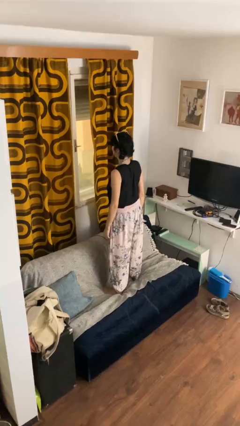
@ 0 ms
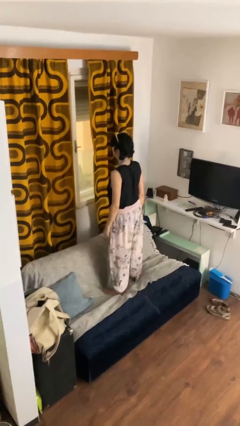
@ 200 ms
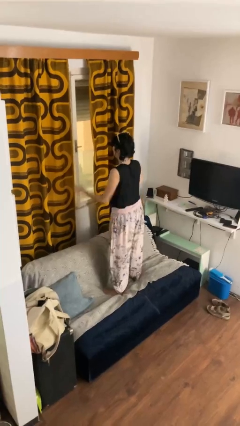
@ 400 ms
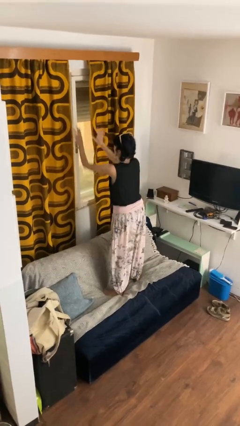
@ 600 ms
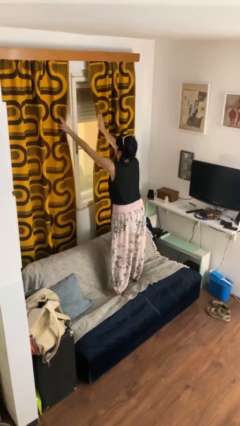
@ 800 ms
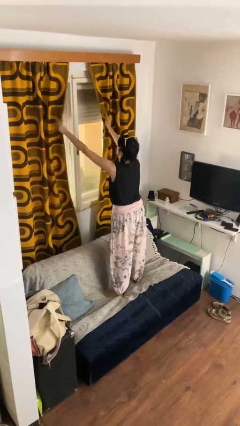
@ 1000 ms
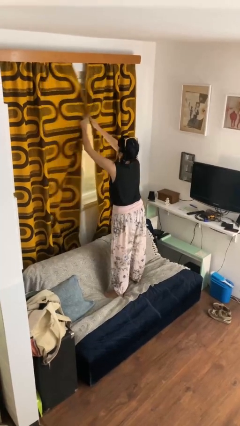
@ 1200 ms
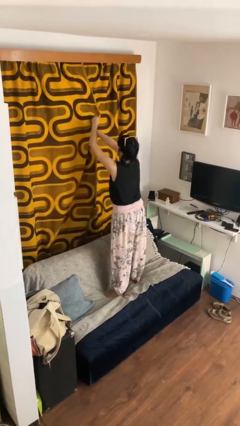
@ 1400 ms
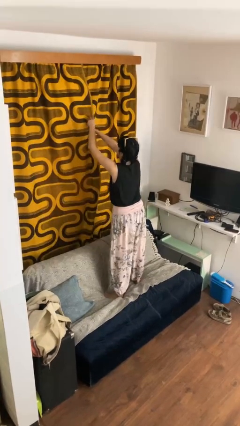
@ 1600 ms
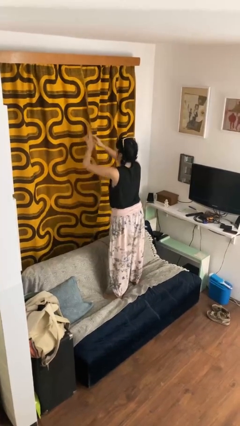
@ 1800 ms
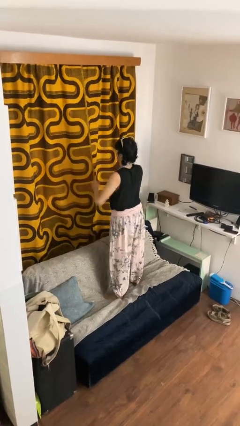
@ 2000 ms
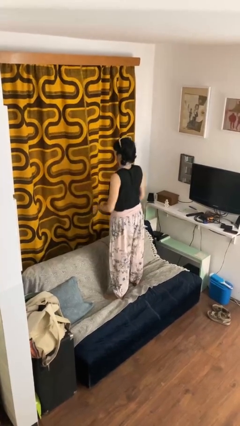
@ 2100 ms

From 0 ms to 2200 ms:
person closes curtains

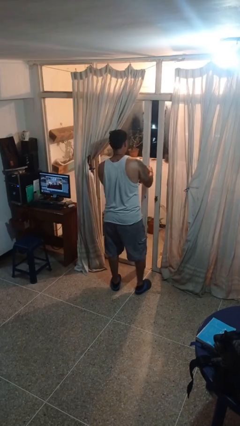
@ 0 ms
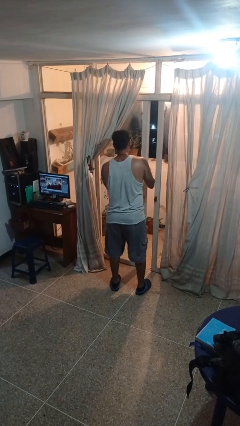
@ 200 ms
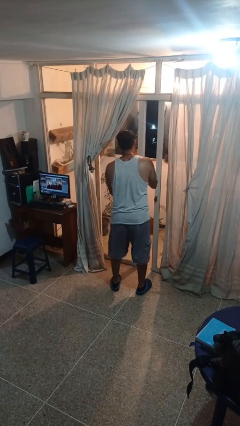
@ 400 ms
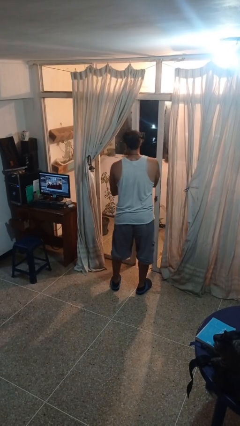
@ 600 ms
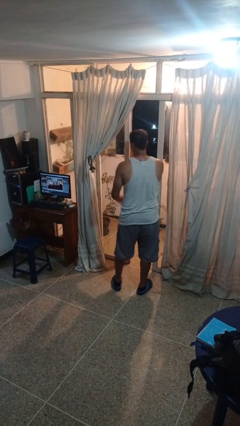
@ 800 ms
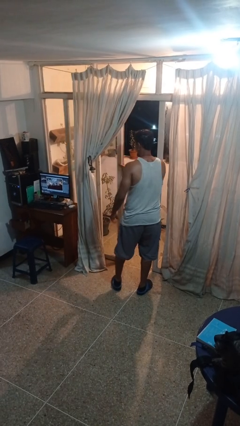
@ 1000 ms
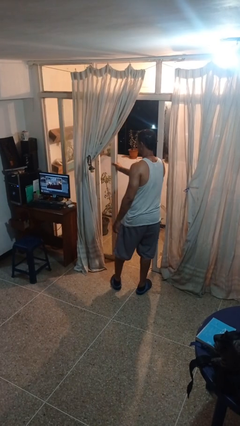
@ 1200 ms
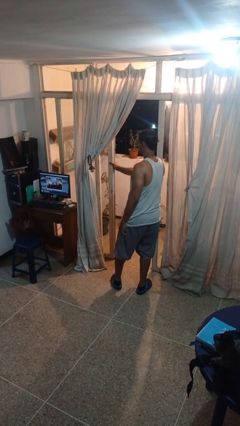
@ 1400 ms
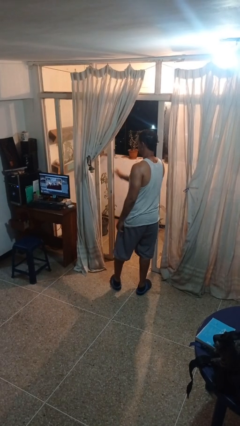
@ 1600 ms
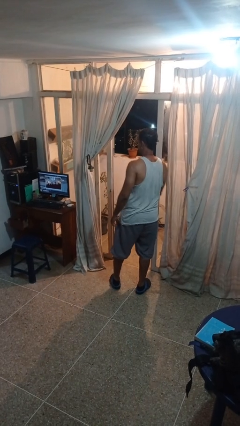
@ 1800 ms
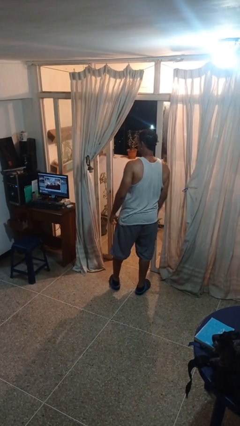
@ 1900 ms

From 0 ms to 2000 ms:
person opens sliding door

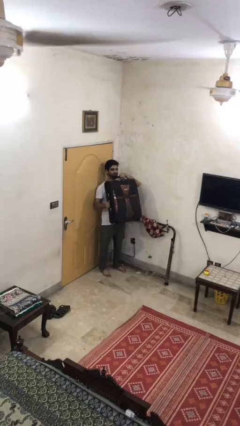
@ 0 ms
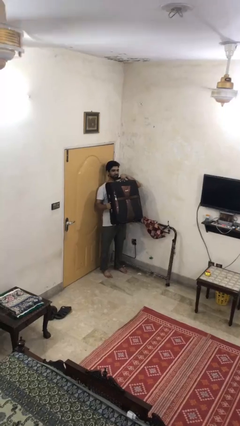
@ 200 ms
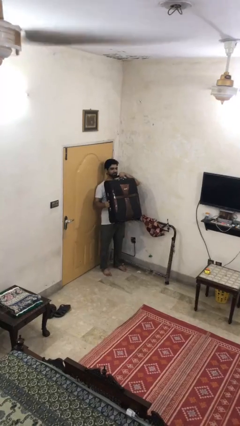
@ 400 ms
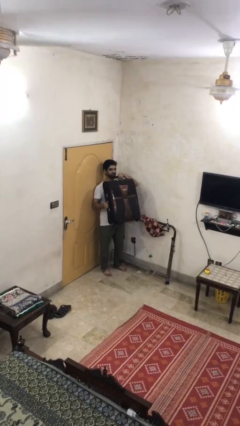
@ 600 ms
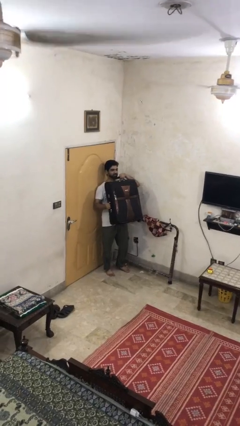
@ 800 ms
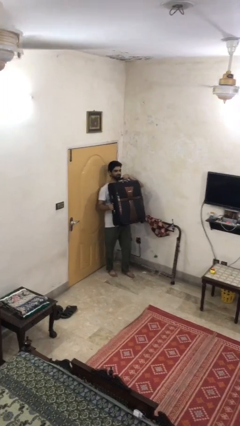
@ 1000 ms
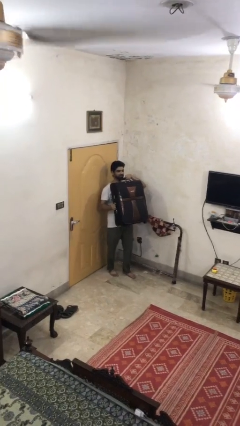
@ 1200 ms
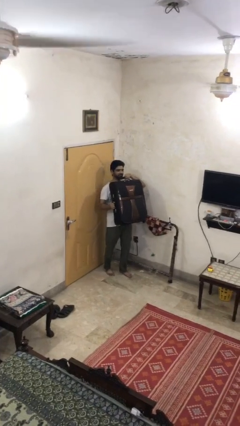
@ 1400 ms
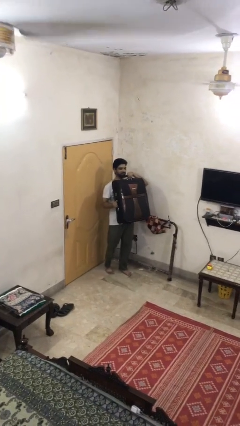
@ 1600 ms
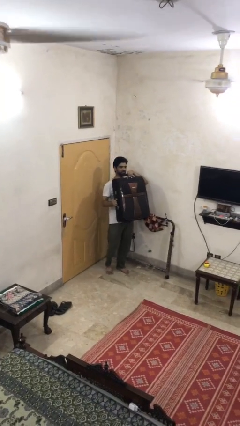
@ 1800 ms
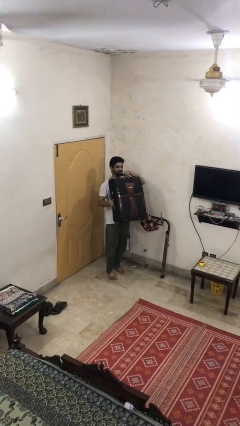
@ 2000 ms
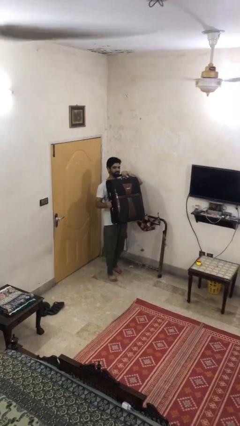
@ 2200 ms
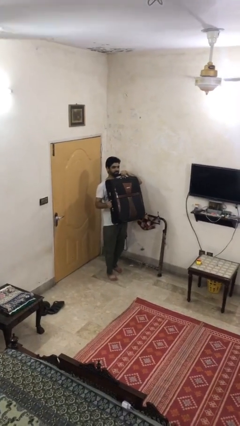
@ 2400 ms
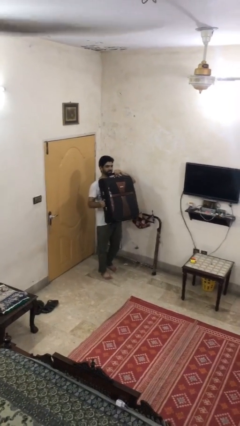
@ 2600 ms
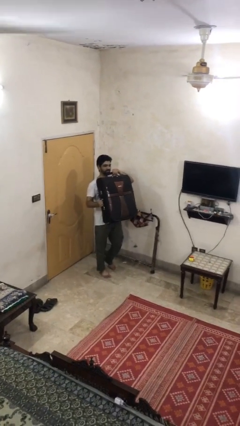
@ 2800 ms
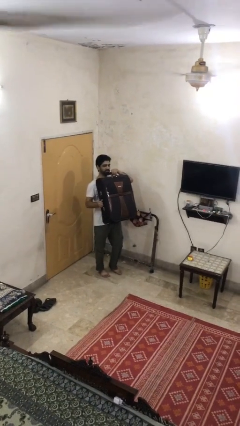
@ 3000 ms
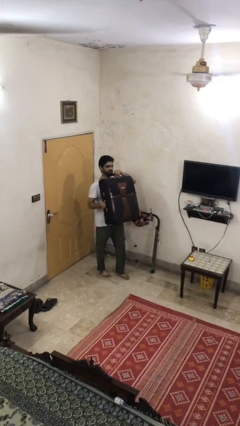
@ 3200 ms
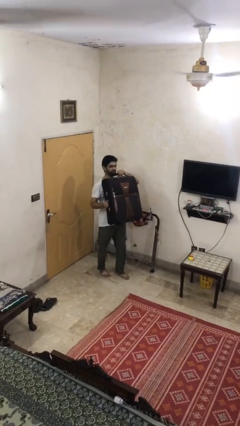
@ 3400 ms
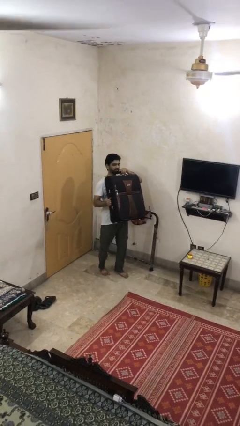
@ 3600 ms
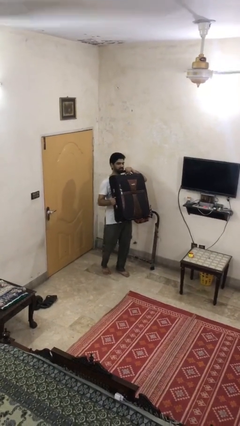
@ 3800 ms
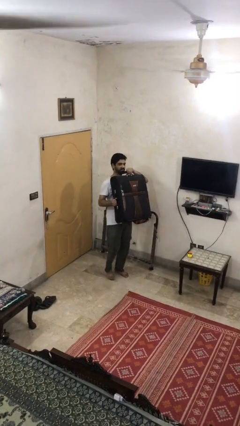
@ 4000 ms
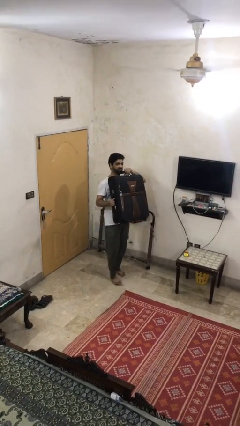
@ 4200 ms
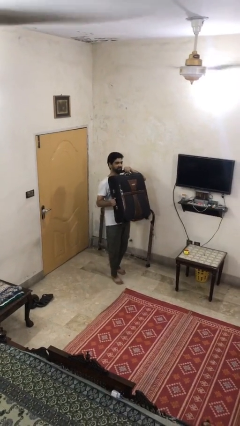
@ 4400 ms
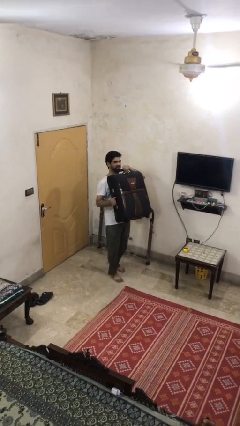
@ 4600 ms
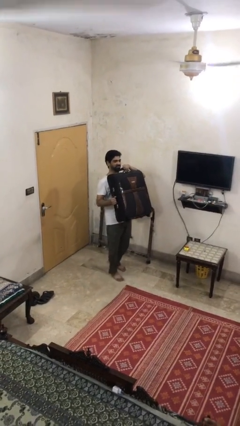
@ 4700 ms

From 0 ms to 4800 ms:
person carries heavy object

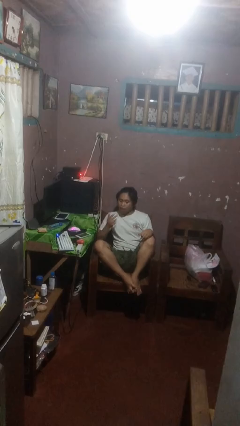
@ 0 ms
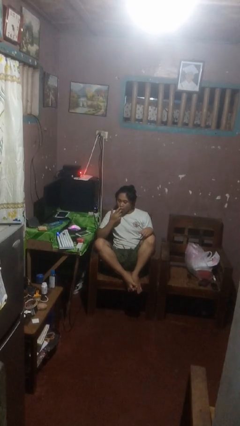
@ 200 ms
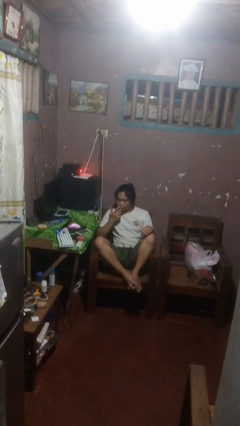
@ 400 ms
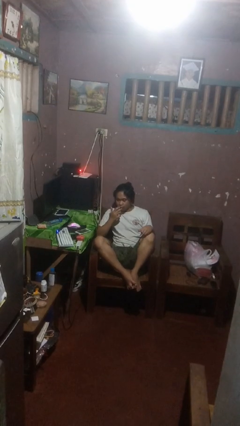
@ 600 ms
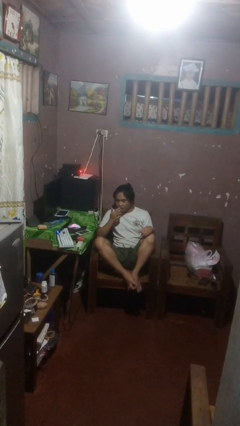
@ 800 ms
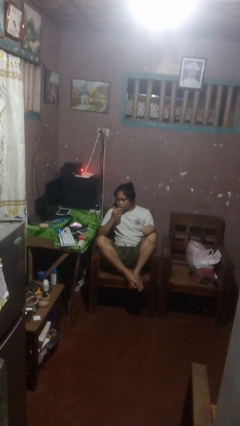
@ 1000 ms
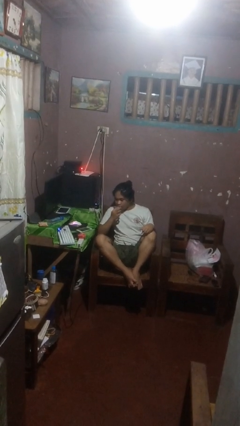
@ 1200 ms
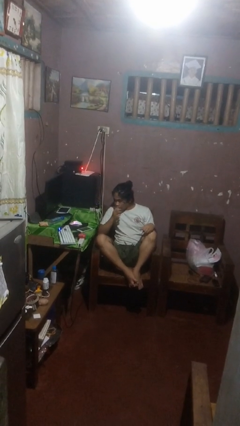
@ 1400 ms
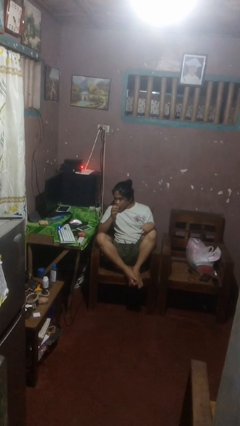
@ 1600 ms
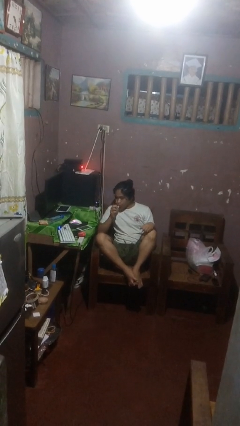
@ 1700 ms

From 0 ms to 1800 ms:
person licks fingers

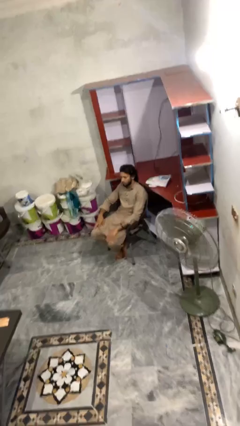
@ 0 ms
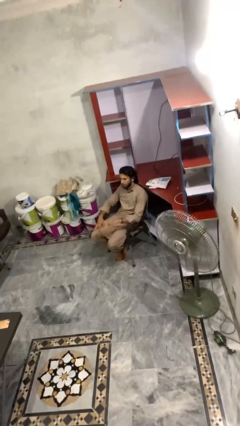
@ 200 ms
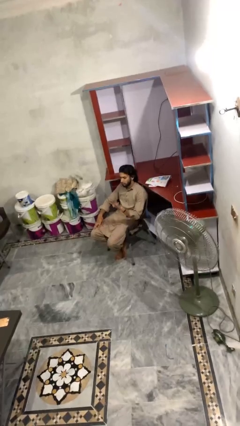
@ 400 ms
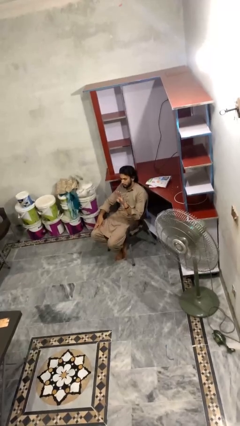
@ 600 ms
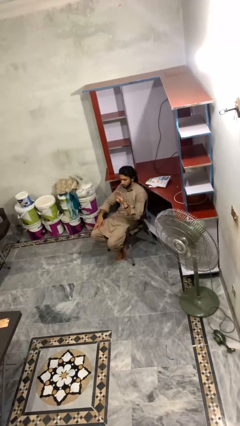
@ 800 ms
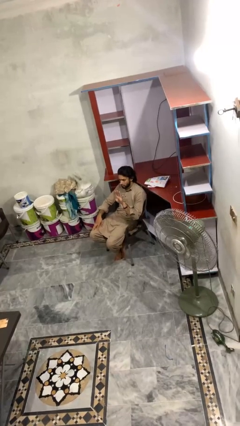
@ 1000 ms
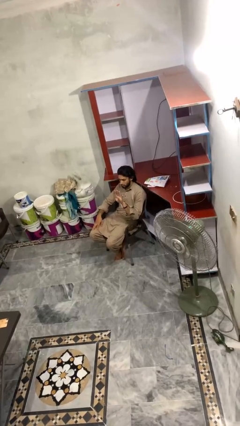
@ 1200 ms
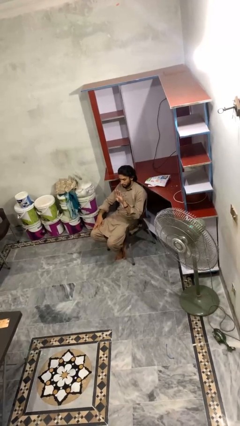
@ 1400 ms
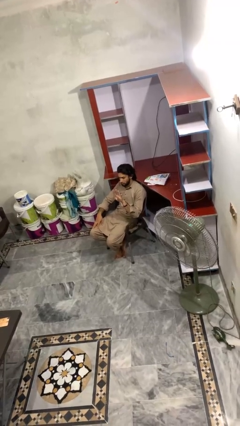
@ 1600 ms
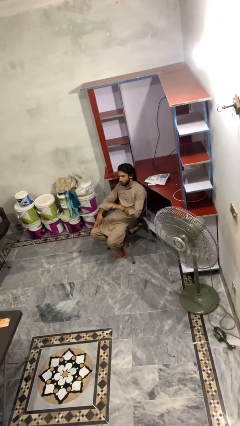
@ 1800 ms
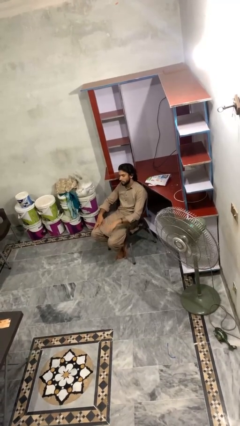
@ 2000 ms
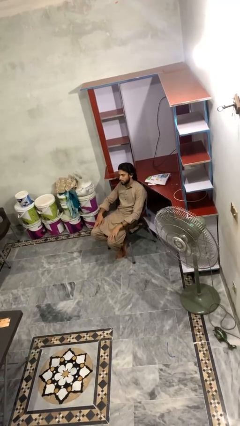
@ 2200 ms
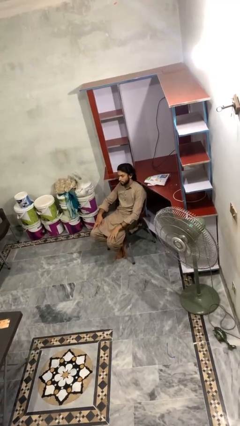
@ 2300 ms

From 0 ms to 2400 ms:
person gestures number four

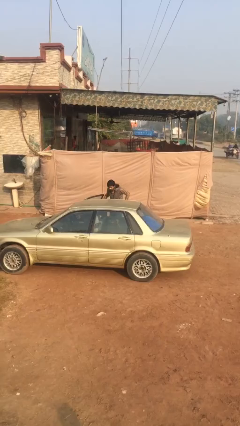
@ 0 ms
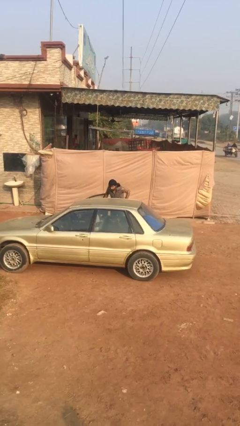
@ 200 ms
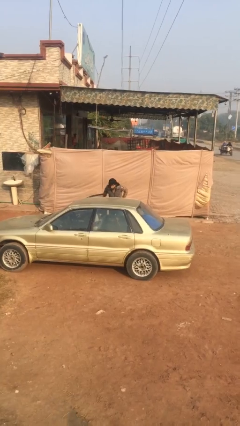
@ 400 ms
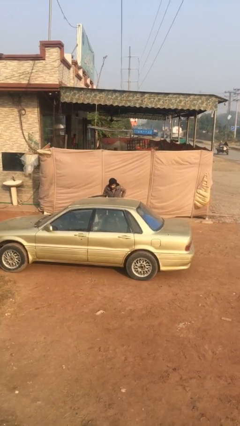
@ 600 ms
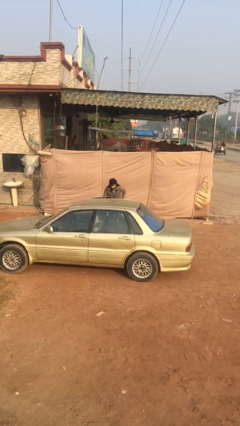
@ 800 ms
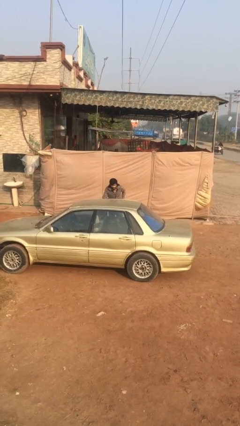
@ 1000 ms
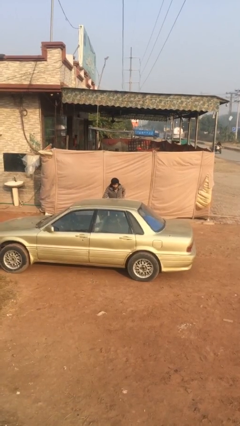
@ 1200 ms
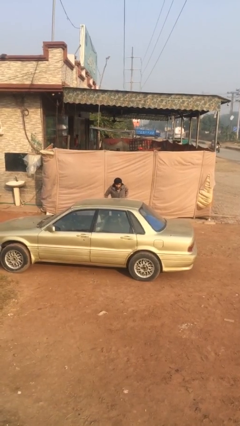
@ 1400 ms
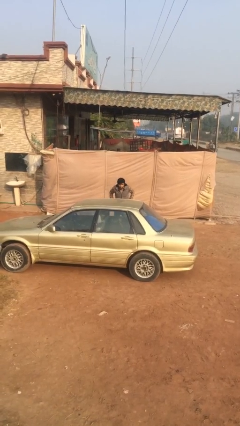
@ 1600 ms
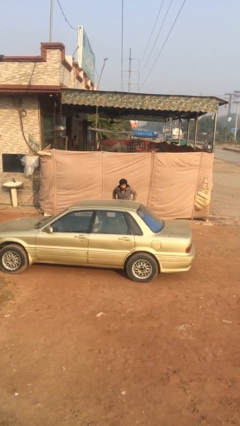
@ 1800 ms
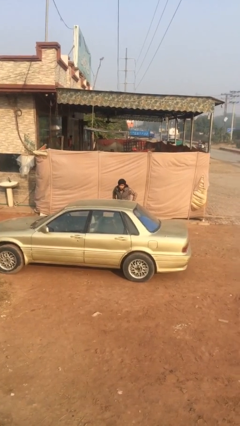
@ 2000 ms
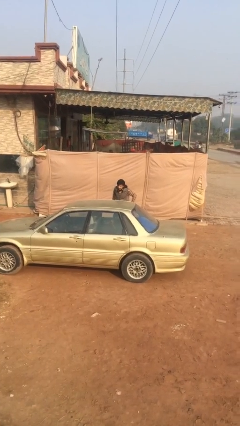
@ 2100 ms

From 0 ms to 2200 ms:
person closes car door

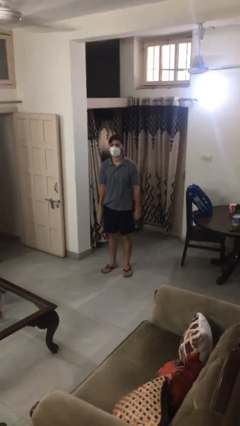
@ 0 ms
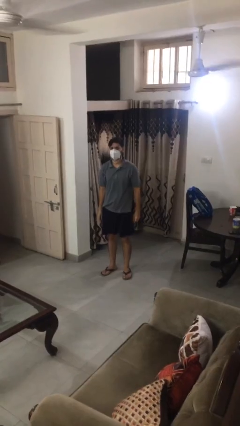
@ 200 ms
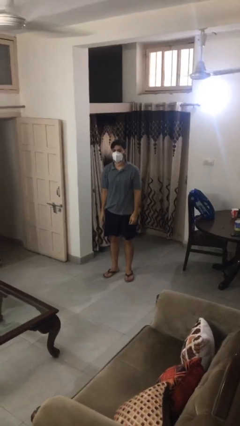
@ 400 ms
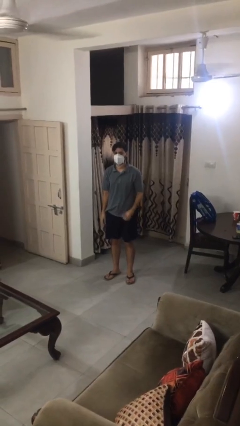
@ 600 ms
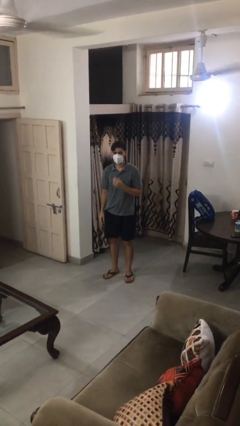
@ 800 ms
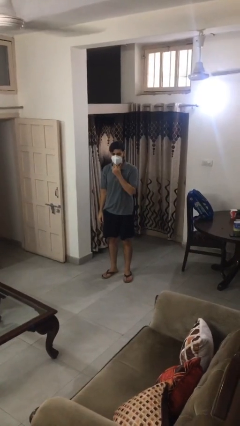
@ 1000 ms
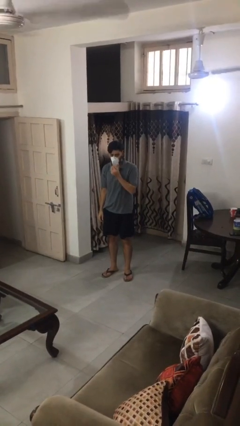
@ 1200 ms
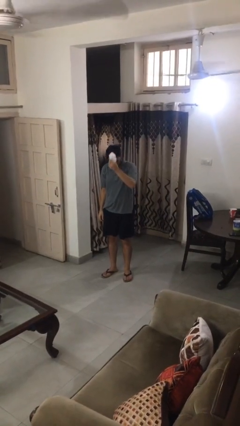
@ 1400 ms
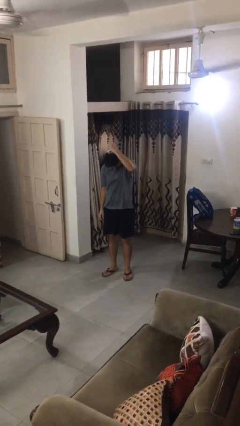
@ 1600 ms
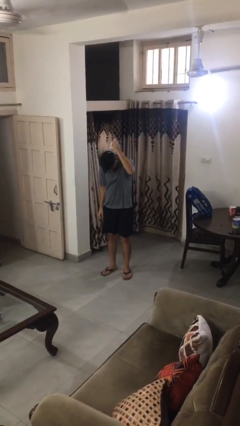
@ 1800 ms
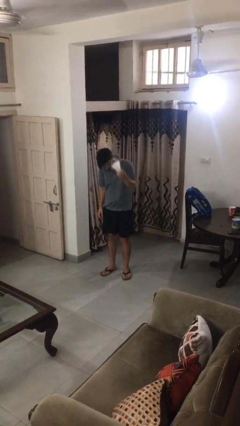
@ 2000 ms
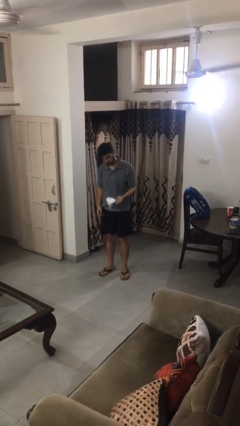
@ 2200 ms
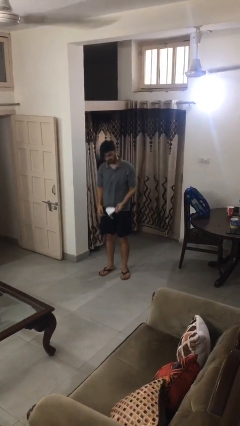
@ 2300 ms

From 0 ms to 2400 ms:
person takes off facemask
